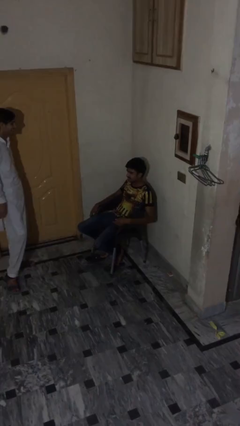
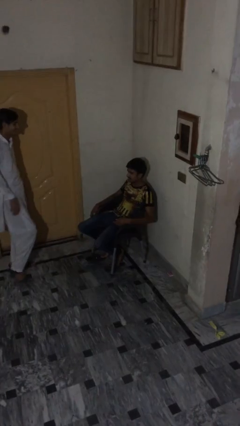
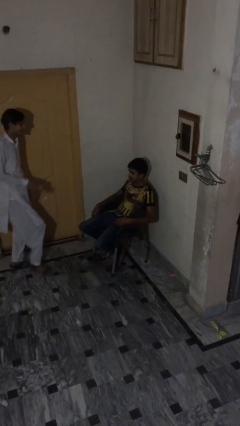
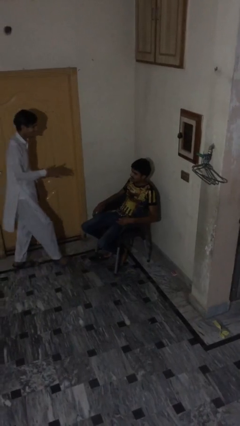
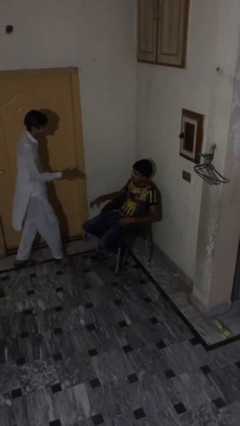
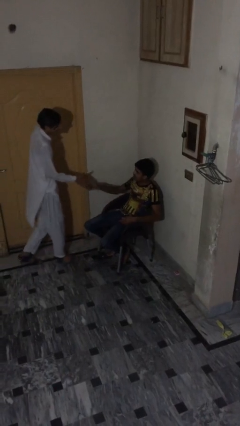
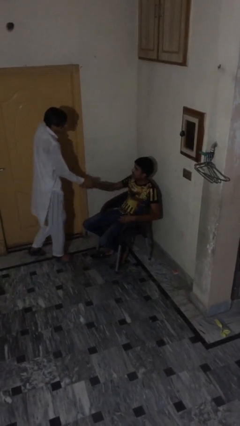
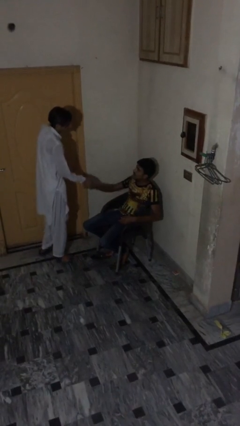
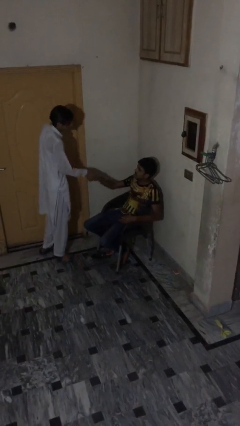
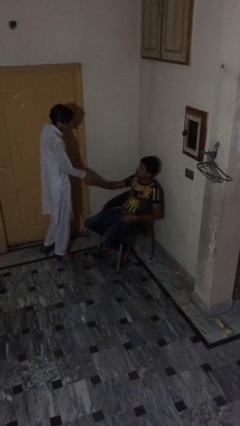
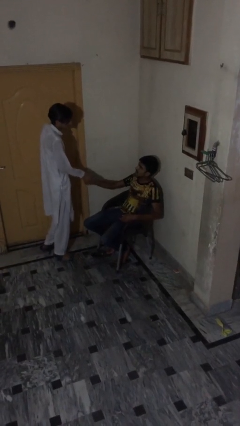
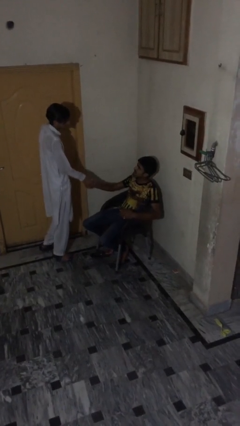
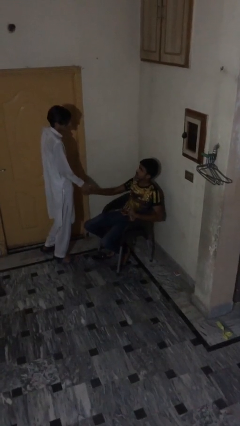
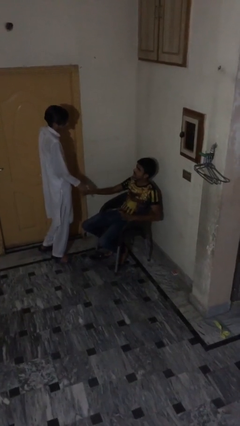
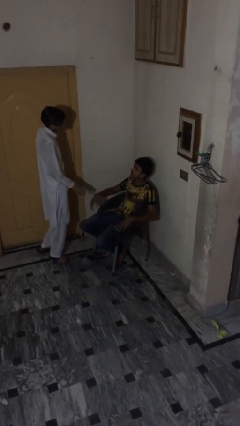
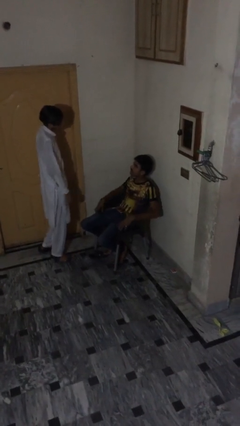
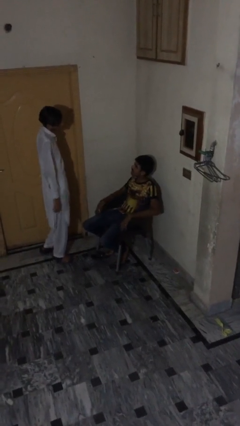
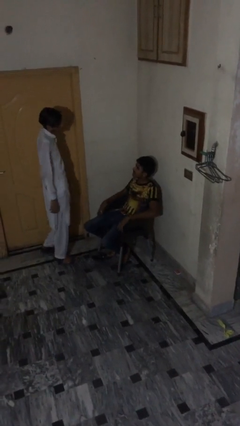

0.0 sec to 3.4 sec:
person shakes hand

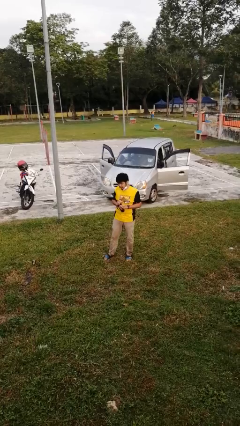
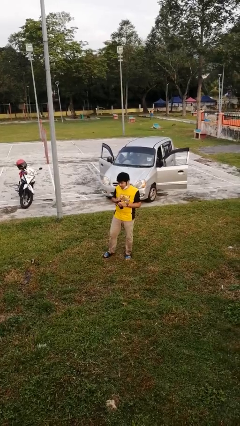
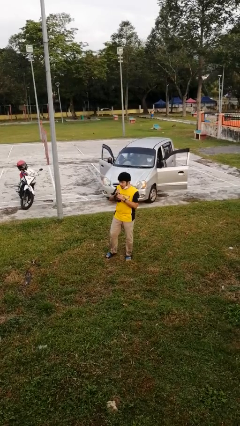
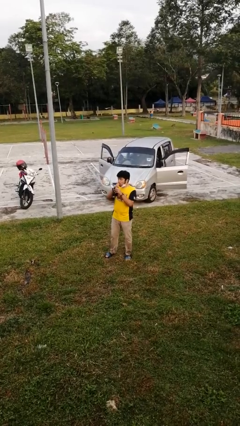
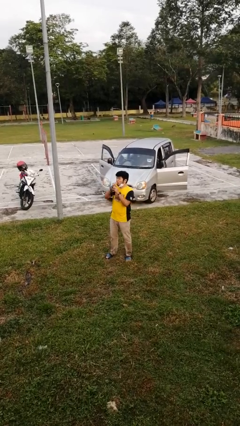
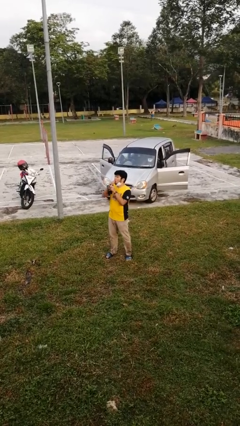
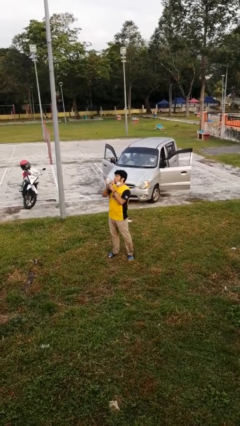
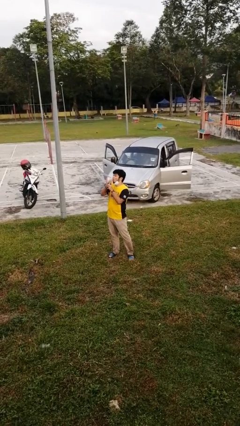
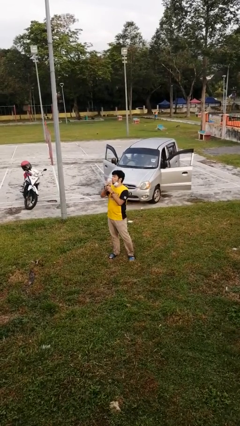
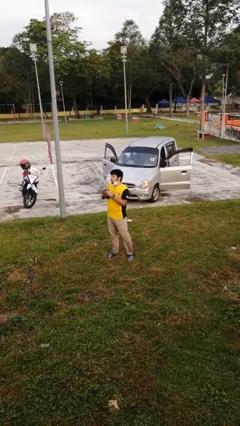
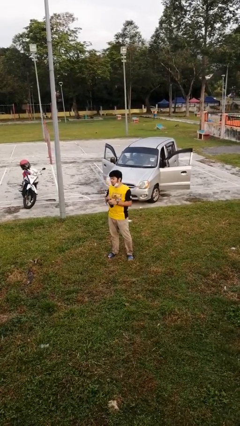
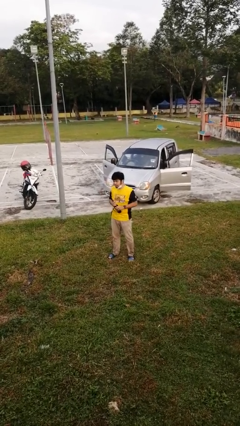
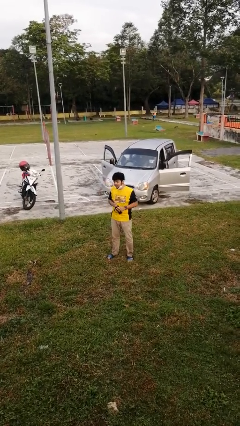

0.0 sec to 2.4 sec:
person drinks from straw

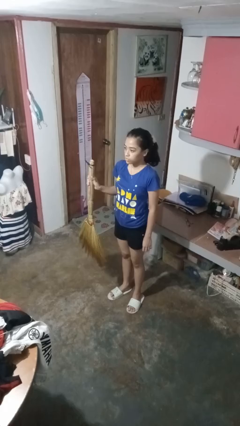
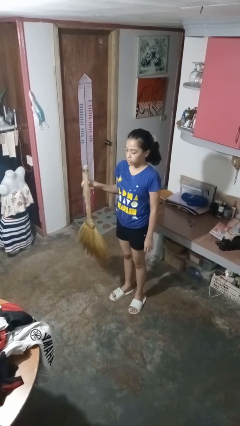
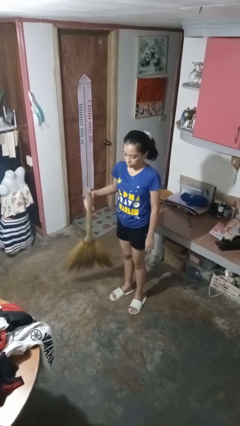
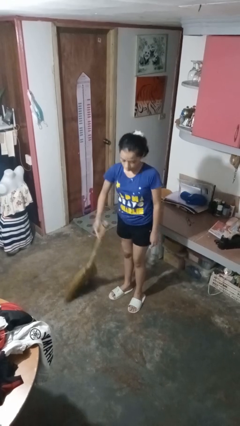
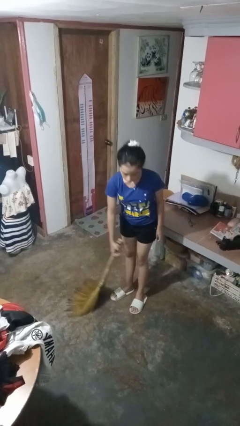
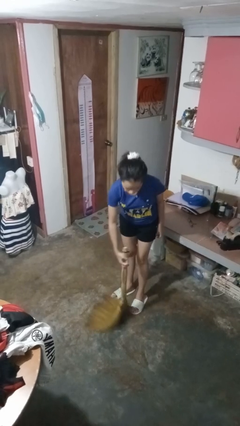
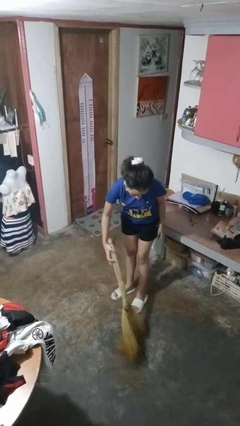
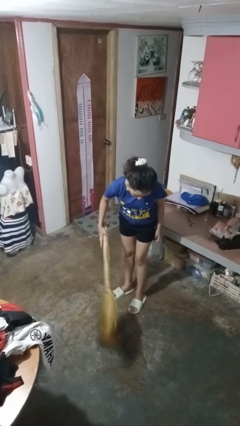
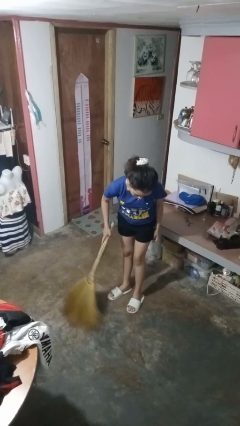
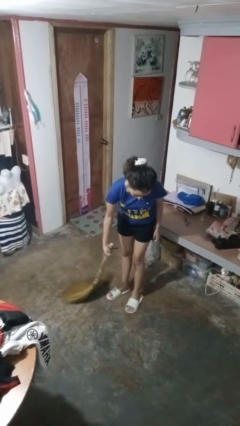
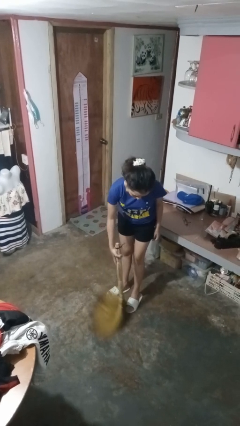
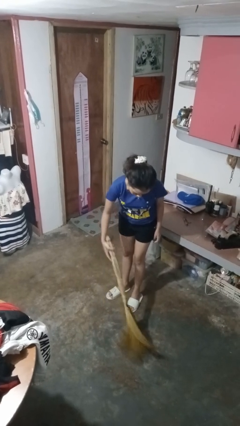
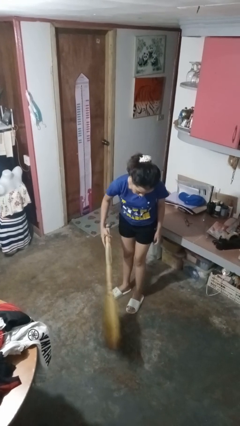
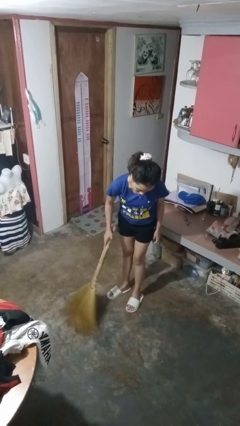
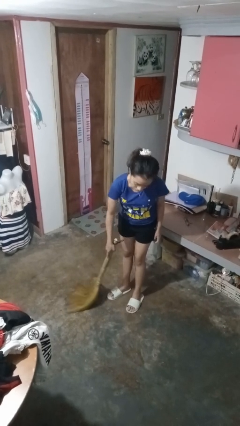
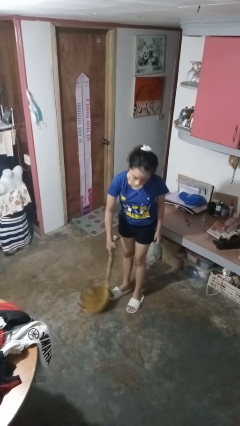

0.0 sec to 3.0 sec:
person sweeps floor

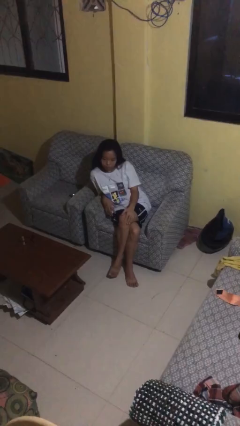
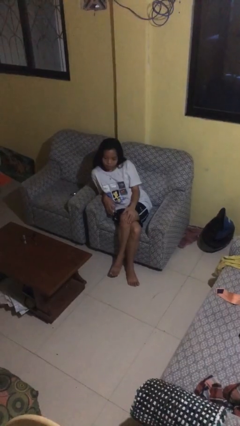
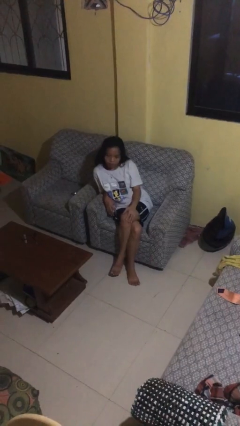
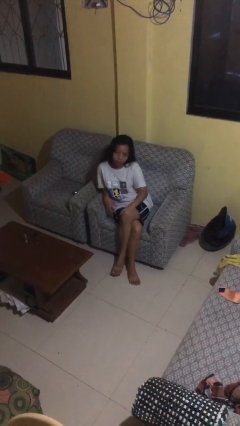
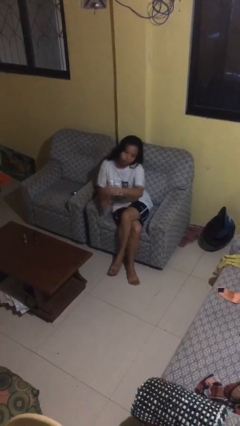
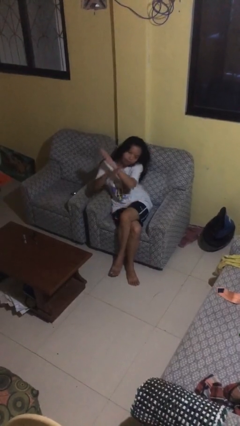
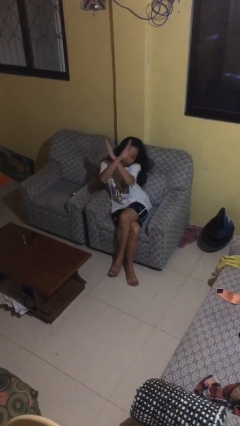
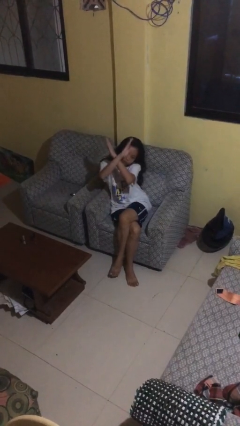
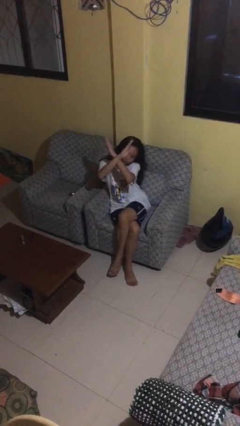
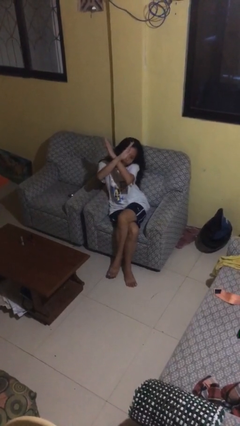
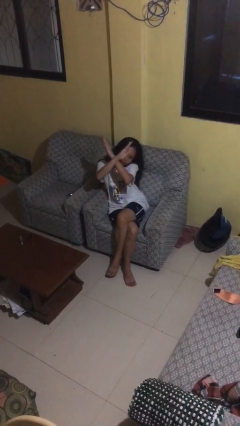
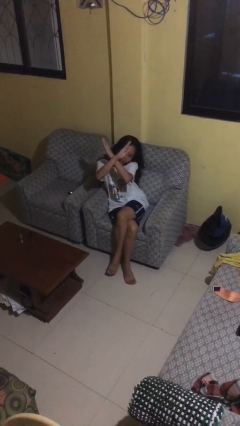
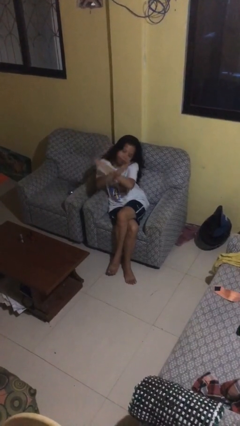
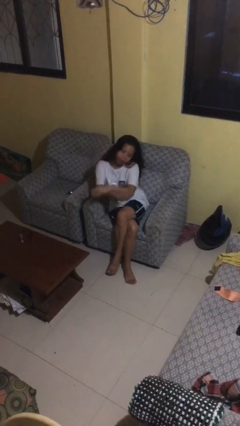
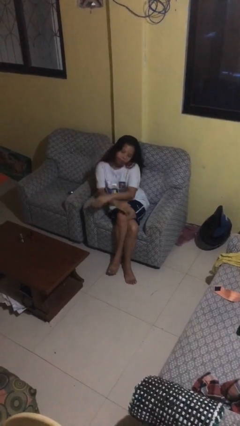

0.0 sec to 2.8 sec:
person gestures arms x

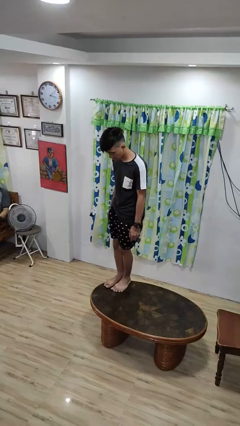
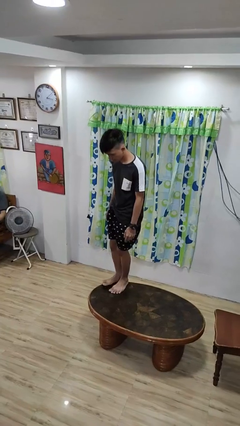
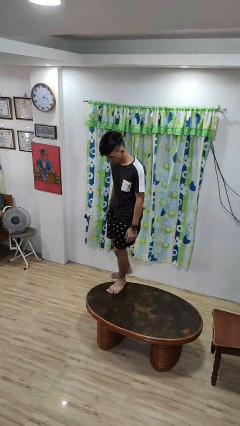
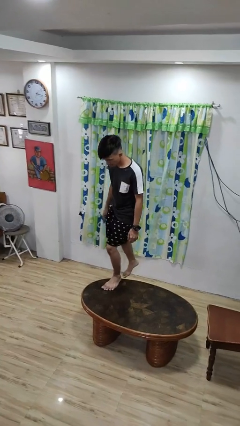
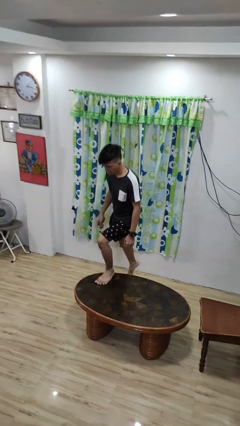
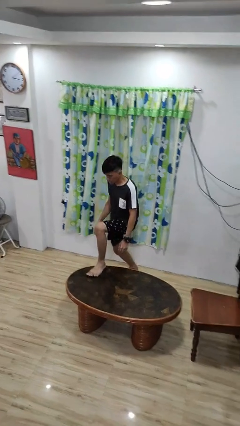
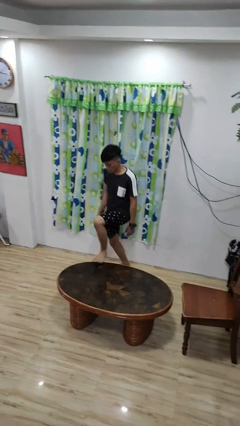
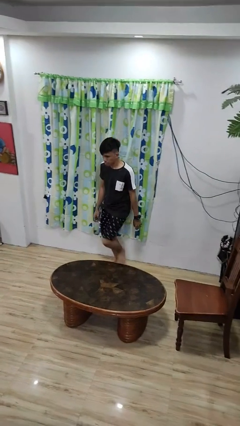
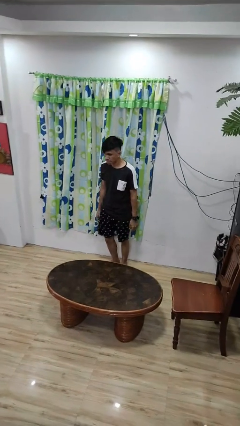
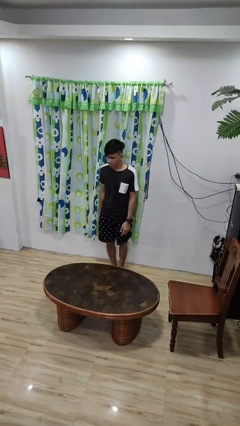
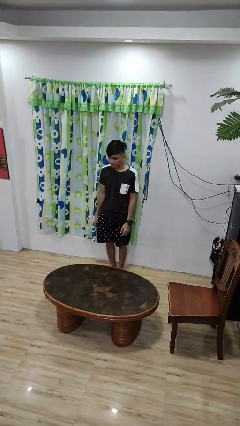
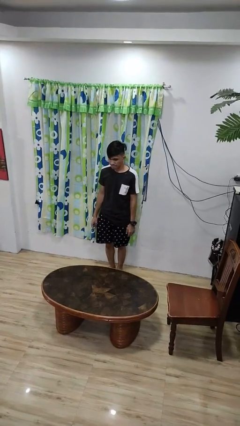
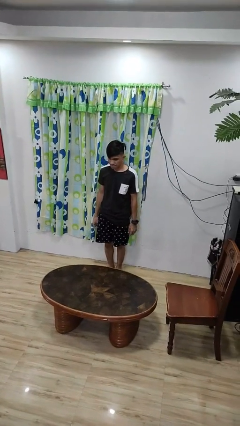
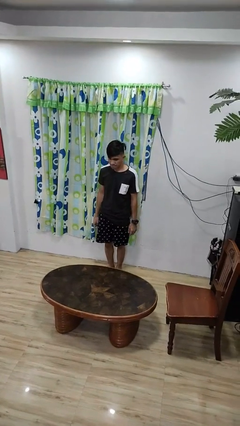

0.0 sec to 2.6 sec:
person climbs off table

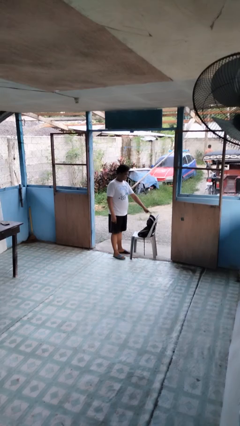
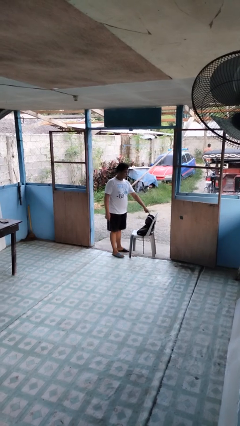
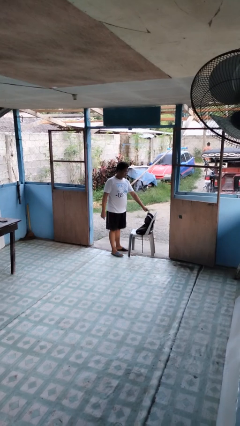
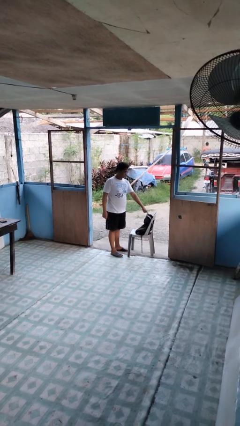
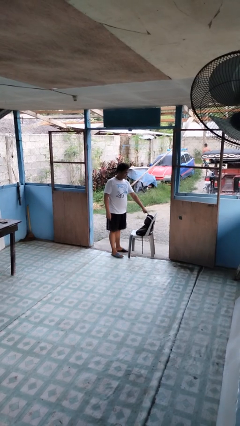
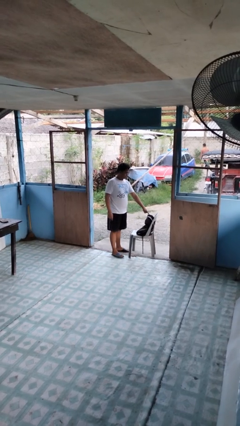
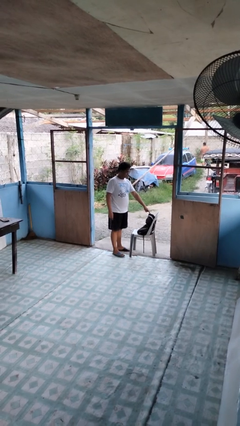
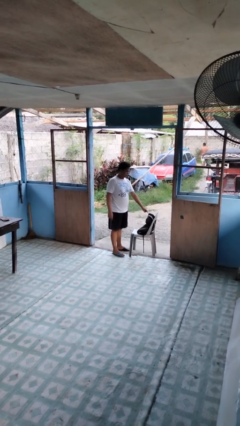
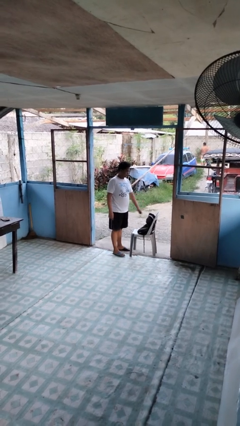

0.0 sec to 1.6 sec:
person taps object with finger

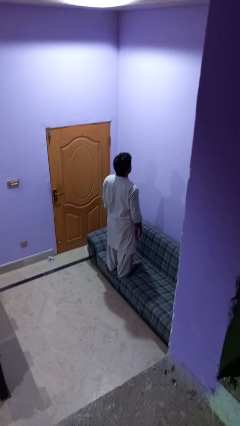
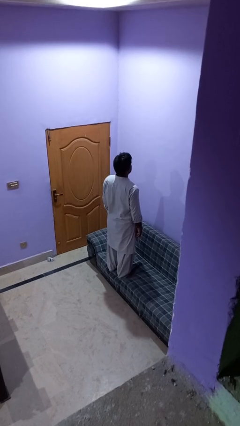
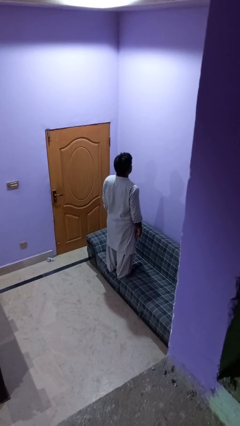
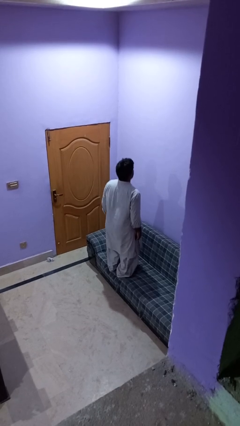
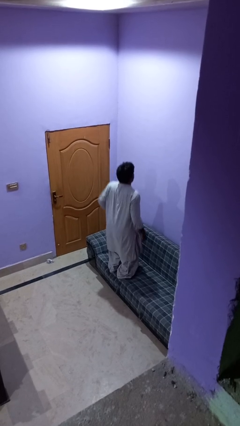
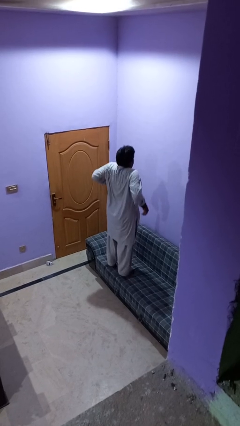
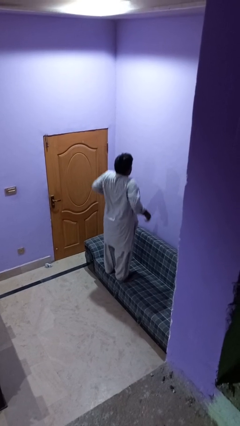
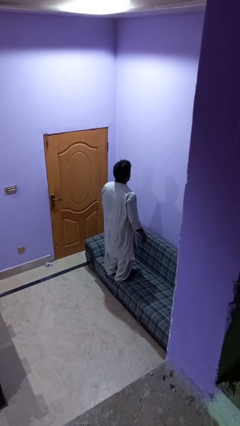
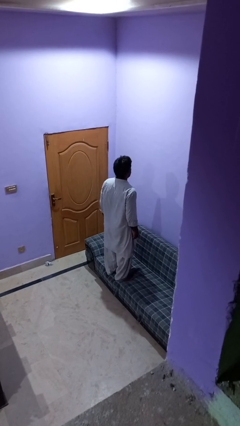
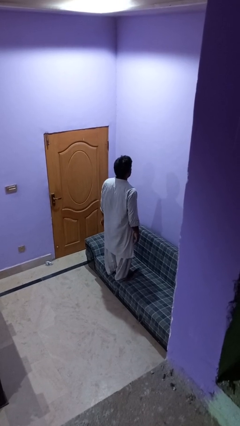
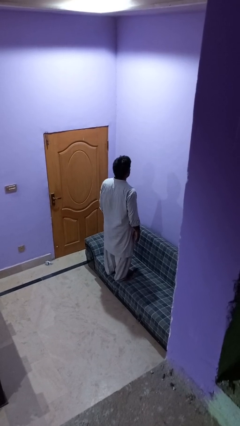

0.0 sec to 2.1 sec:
person jumps on couch
